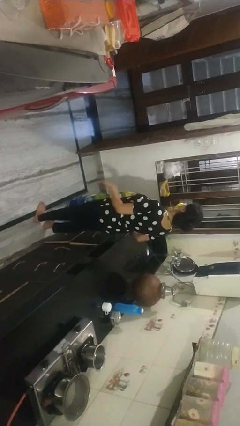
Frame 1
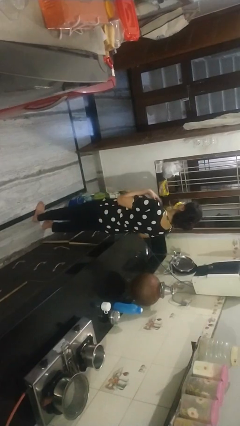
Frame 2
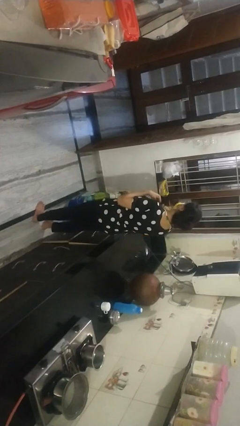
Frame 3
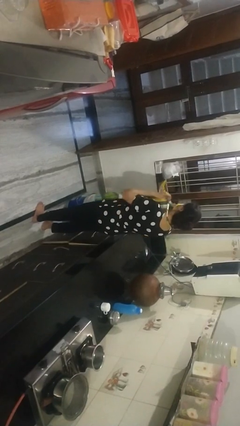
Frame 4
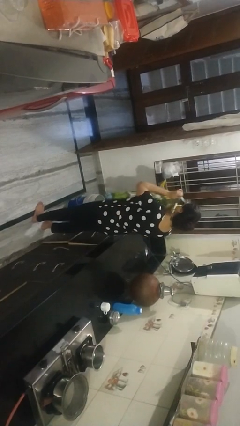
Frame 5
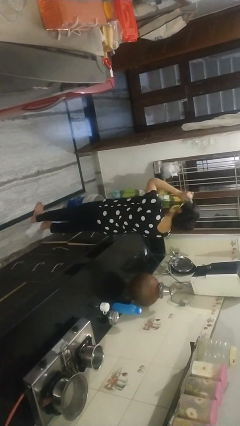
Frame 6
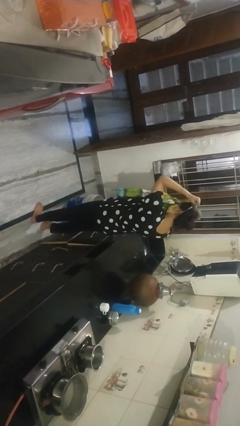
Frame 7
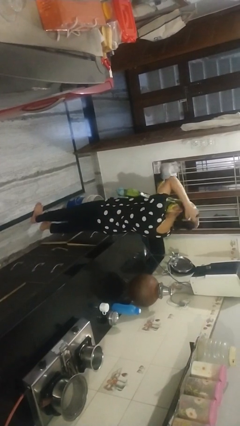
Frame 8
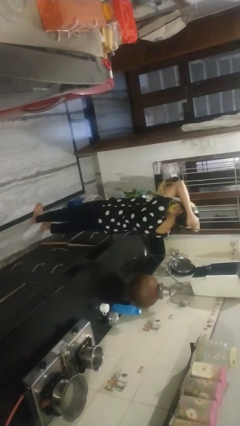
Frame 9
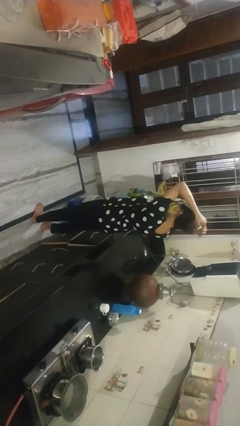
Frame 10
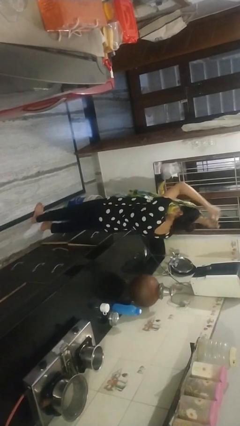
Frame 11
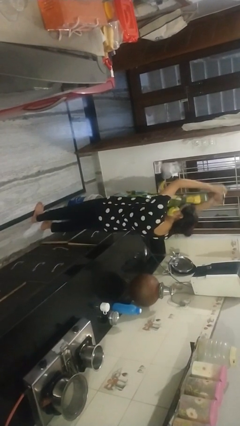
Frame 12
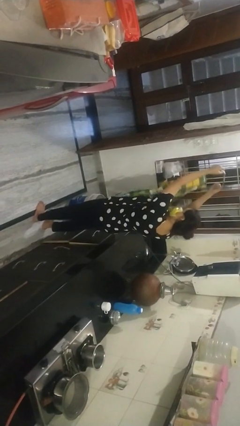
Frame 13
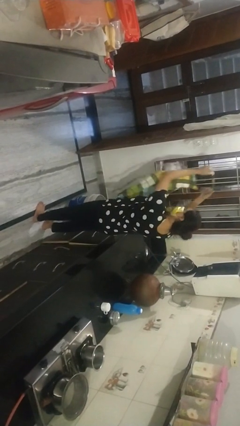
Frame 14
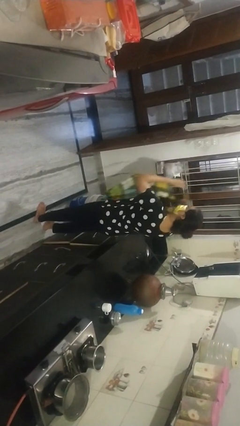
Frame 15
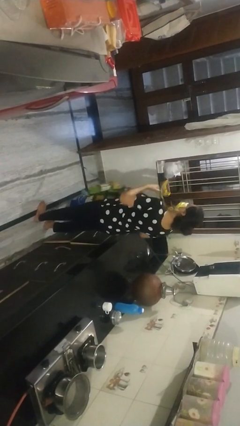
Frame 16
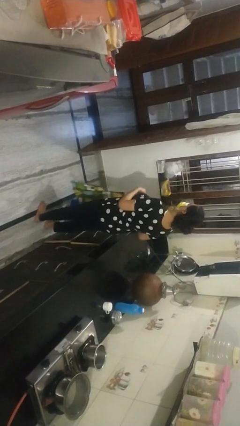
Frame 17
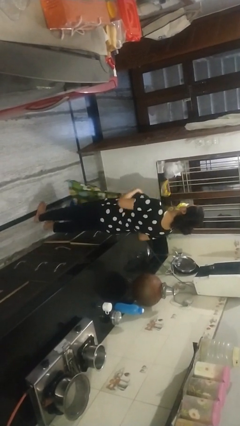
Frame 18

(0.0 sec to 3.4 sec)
person takes off apron

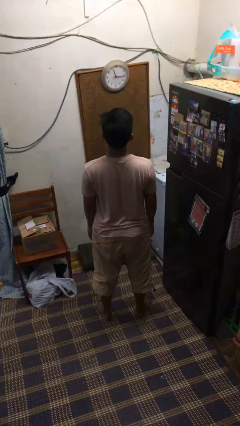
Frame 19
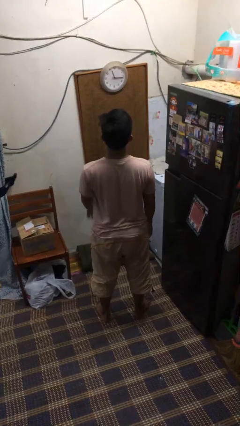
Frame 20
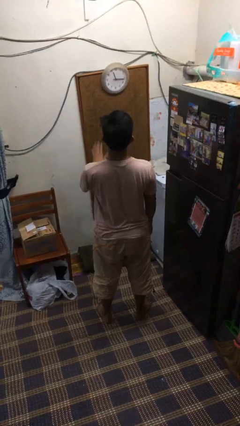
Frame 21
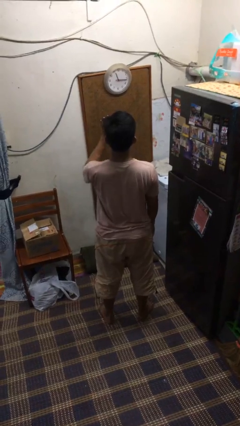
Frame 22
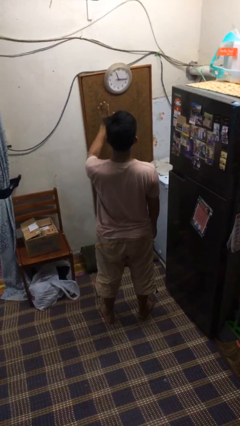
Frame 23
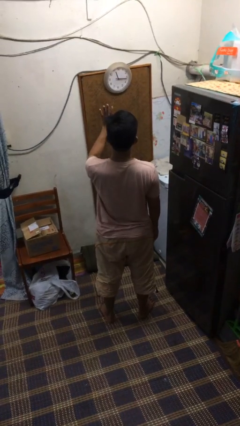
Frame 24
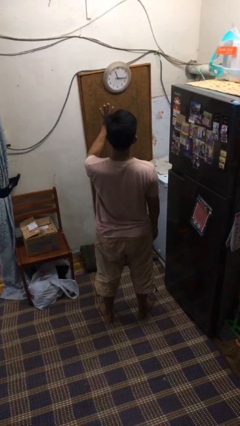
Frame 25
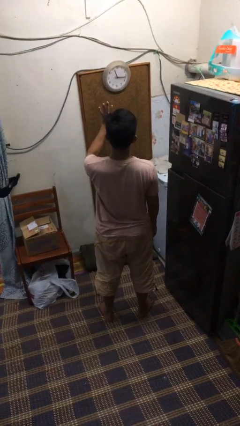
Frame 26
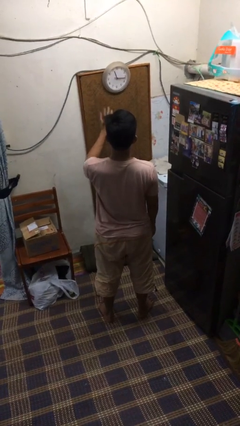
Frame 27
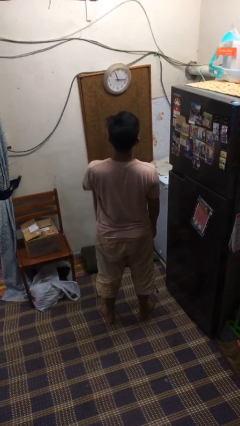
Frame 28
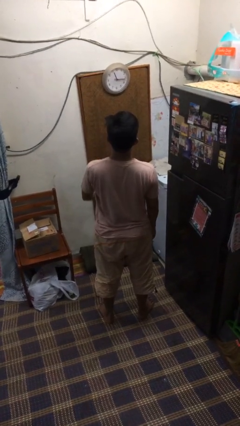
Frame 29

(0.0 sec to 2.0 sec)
person gestures stop

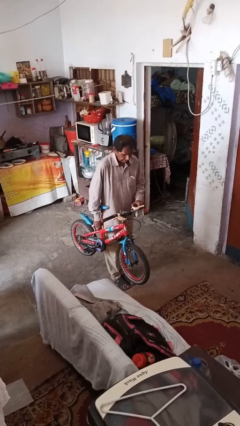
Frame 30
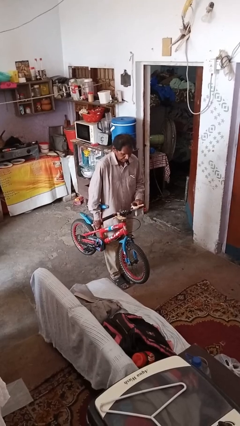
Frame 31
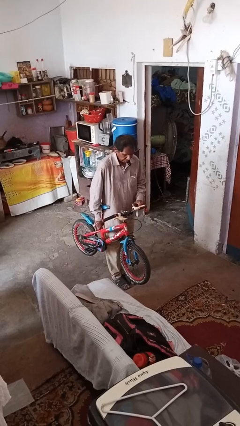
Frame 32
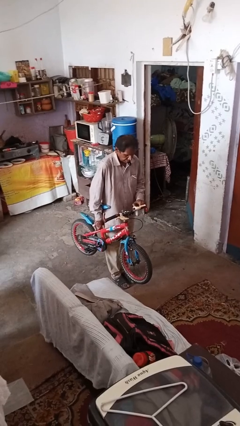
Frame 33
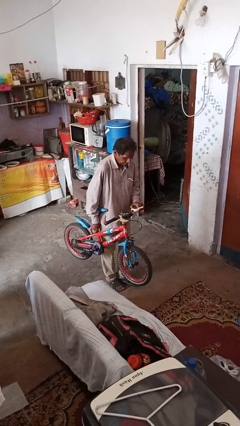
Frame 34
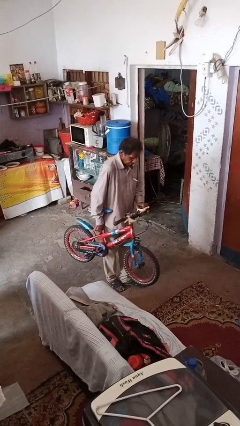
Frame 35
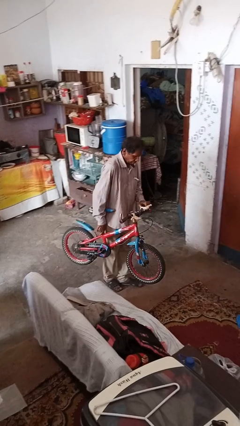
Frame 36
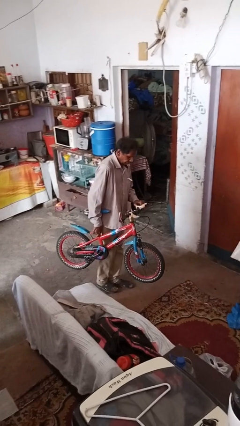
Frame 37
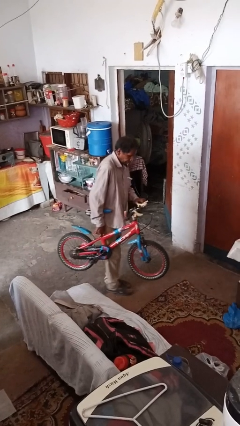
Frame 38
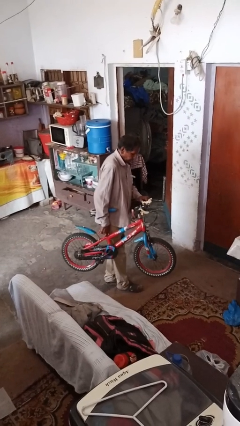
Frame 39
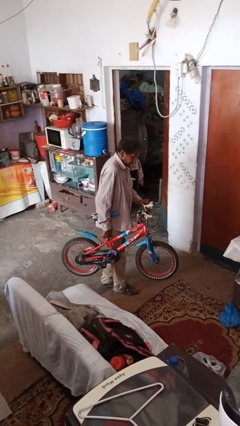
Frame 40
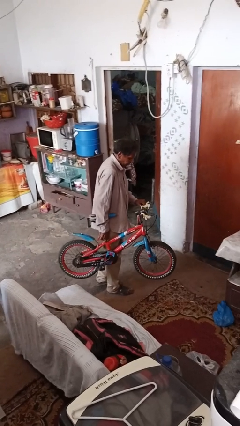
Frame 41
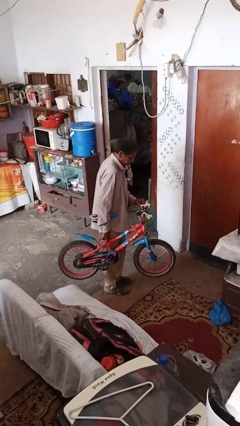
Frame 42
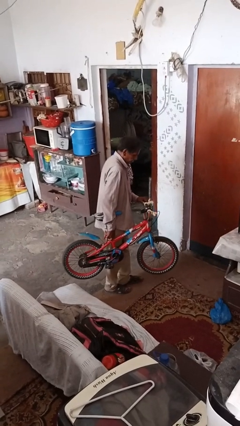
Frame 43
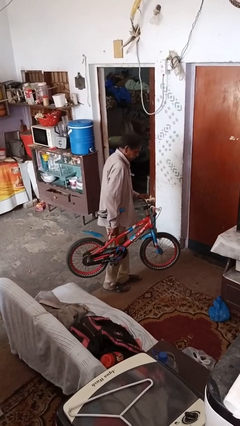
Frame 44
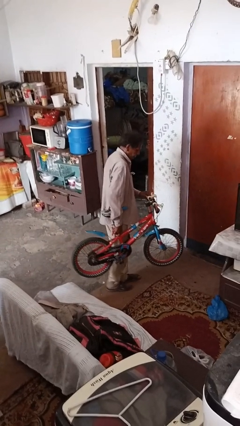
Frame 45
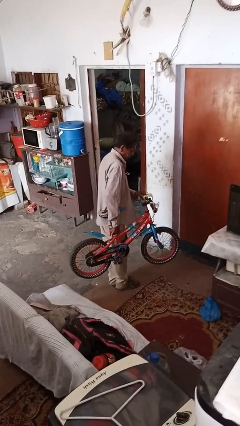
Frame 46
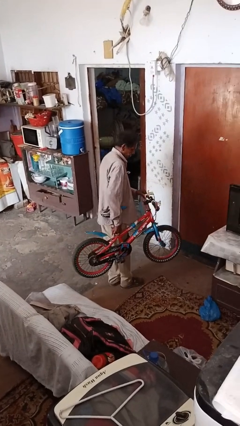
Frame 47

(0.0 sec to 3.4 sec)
person carries bicycle

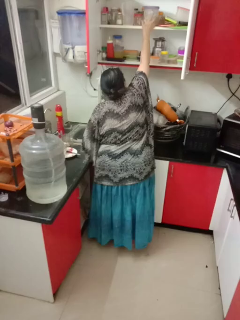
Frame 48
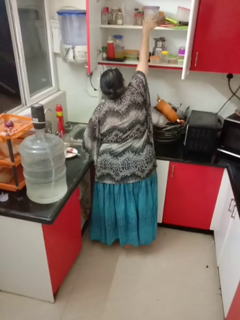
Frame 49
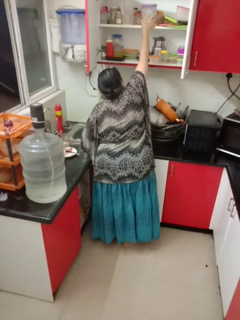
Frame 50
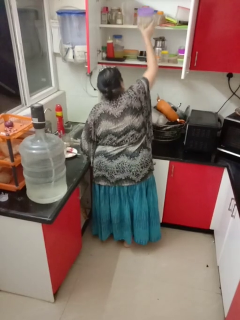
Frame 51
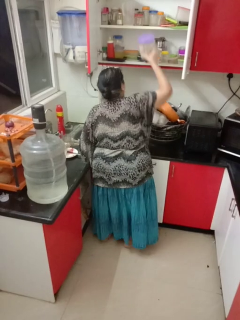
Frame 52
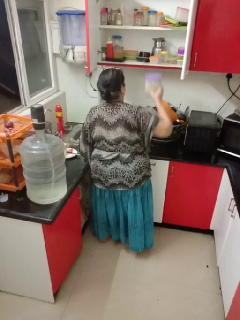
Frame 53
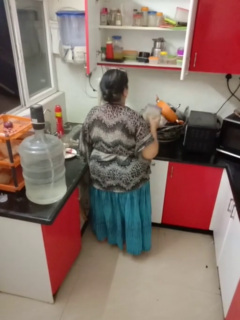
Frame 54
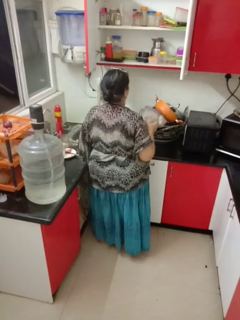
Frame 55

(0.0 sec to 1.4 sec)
person takes object from cabinet

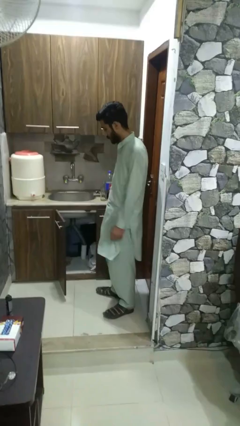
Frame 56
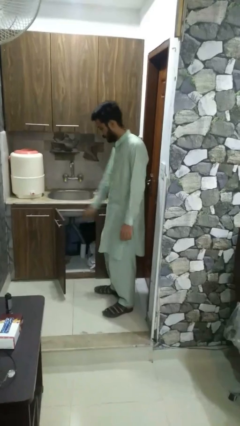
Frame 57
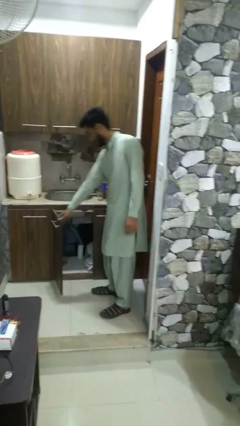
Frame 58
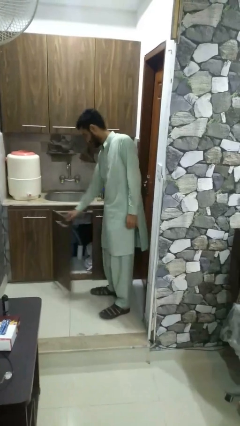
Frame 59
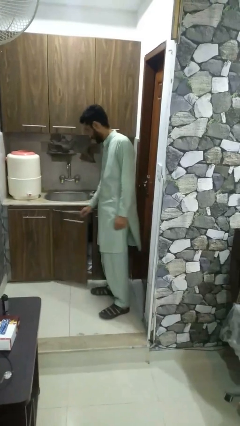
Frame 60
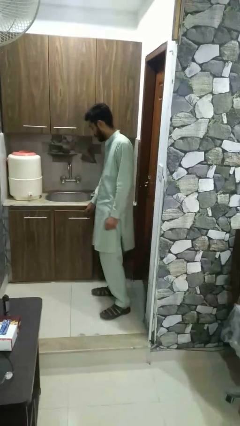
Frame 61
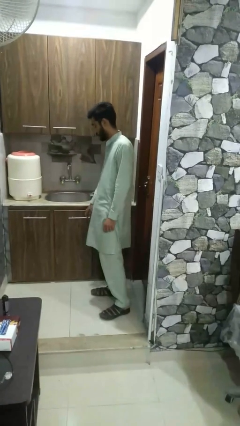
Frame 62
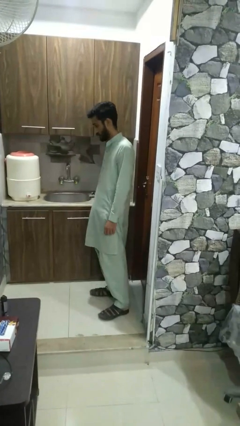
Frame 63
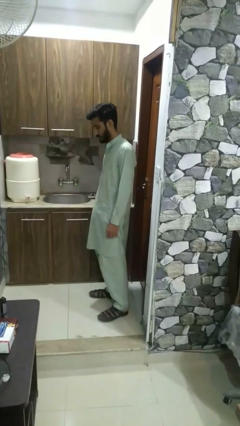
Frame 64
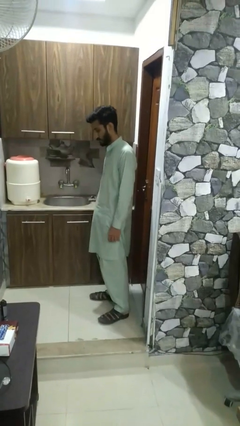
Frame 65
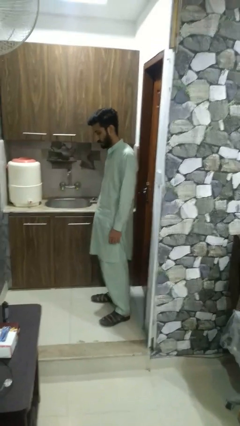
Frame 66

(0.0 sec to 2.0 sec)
person closes closet door

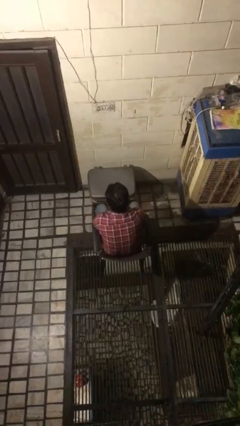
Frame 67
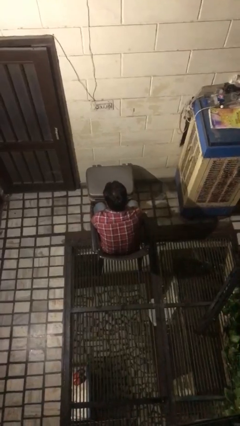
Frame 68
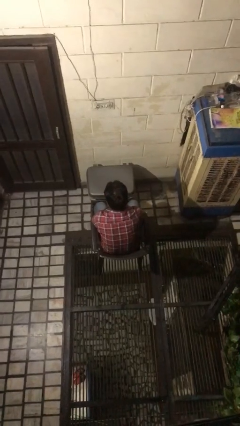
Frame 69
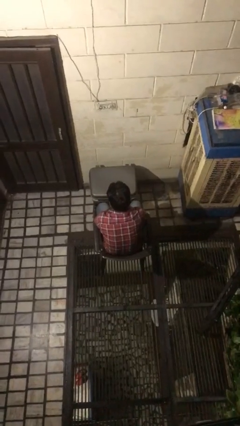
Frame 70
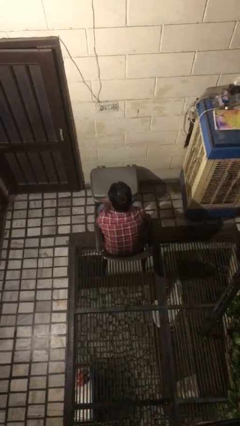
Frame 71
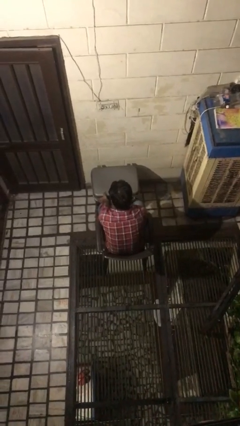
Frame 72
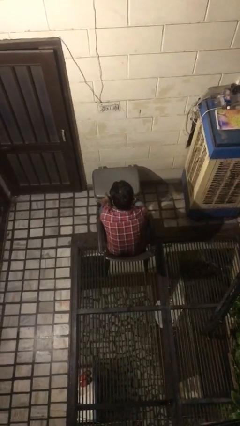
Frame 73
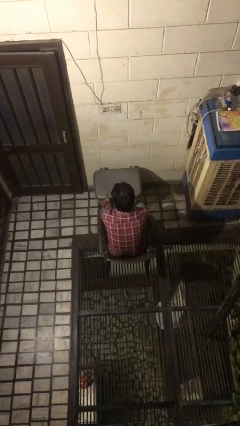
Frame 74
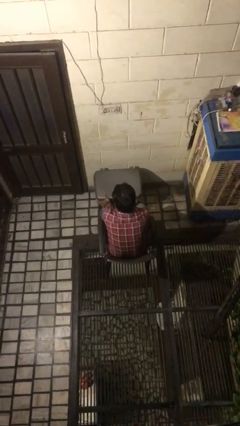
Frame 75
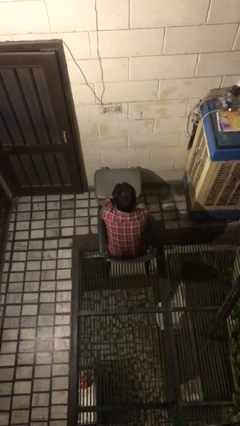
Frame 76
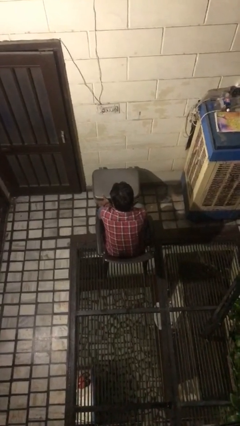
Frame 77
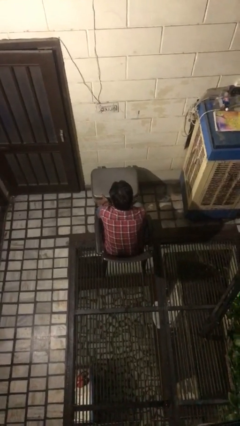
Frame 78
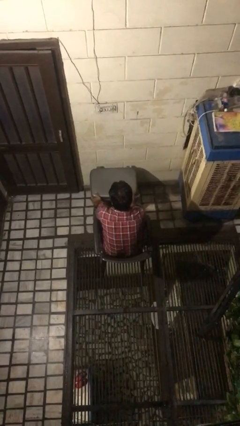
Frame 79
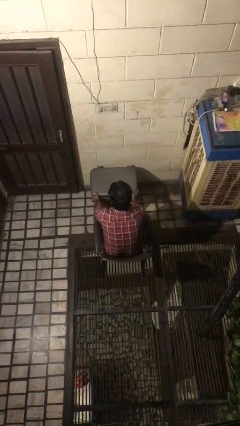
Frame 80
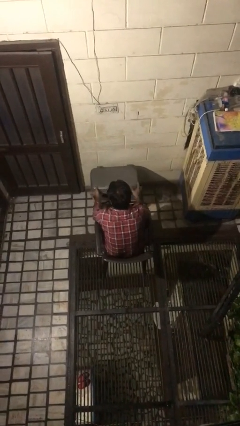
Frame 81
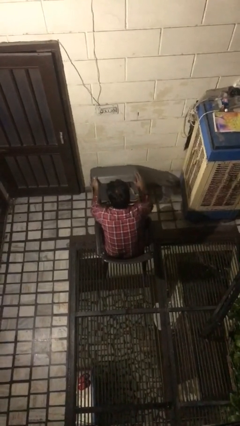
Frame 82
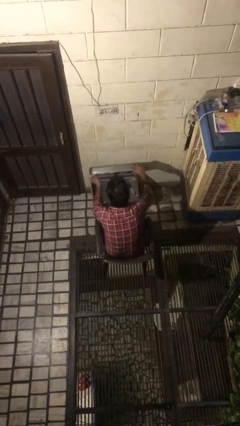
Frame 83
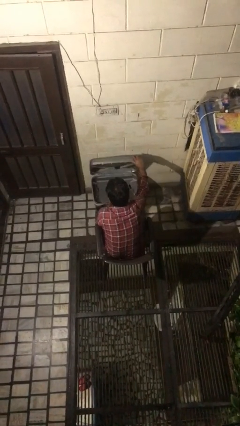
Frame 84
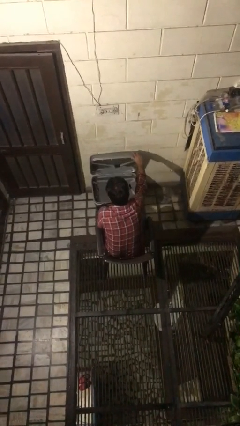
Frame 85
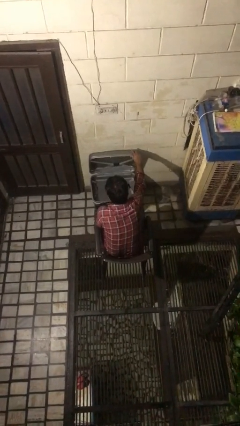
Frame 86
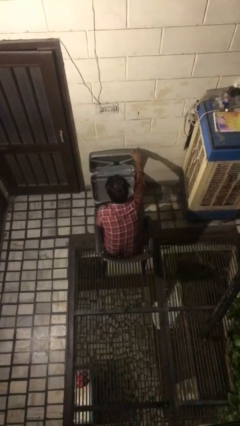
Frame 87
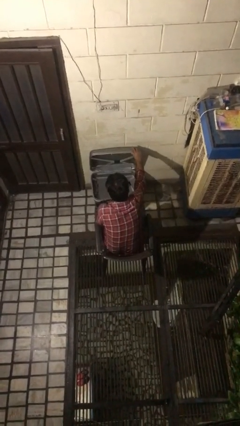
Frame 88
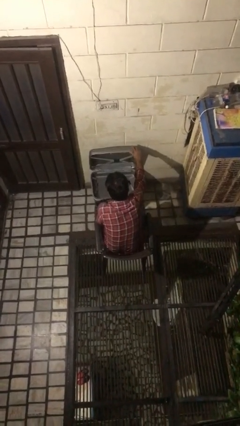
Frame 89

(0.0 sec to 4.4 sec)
person opens suitcase

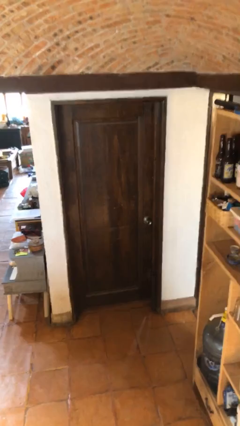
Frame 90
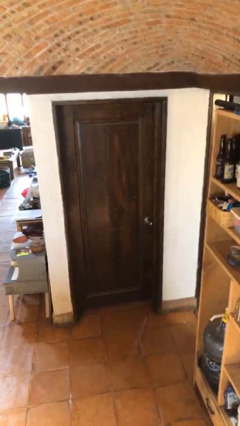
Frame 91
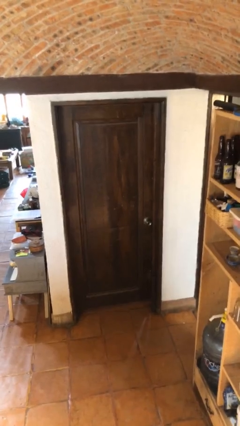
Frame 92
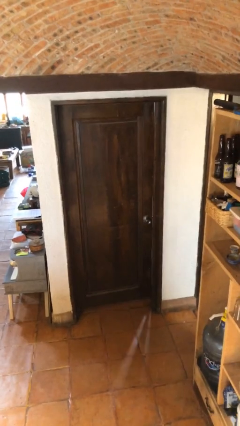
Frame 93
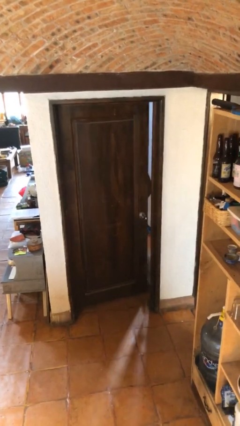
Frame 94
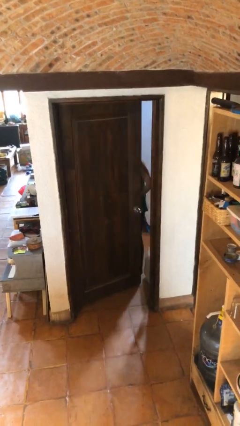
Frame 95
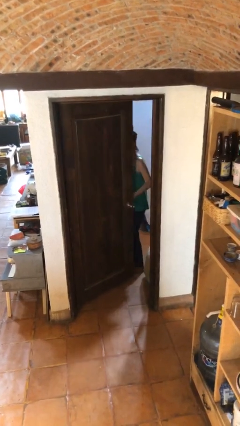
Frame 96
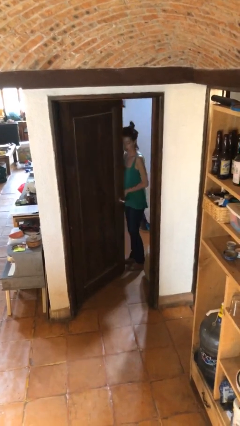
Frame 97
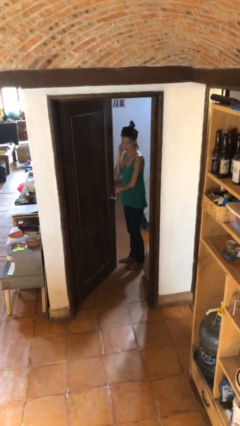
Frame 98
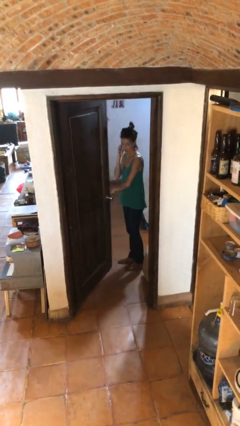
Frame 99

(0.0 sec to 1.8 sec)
person opens facility door
